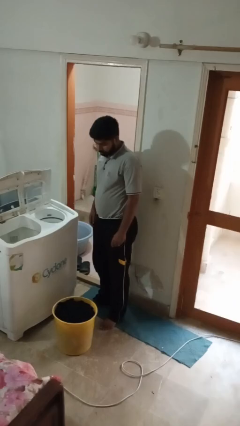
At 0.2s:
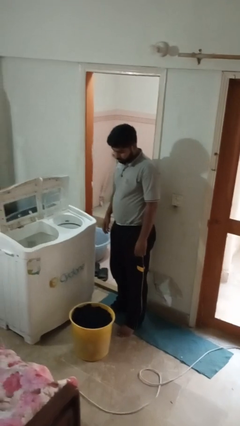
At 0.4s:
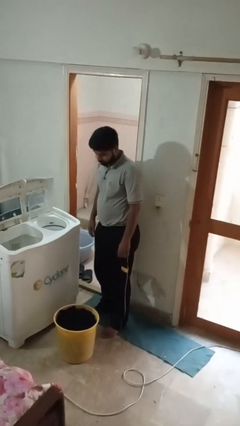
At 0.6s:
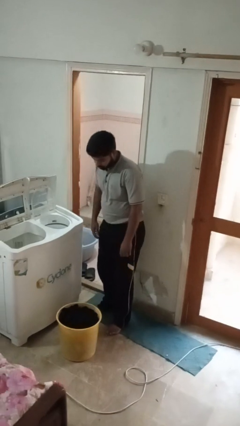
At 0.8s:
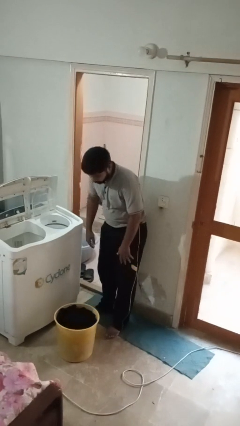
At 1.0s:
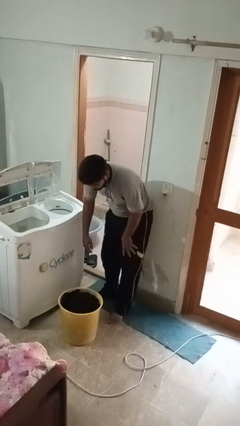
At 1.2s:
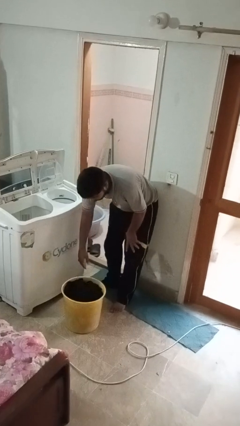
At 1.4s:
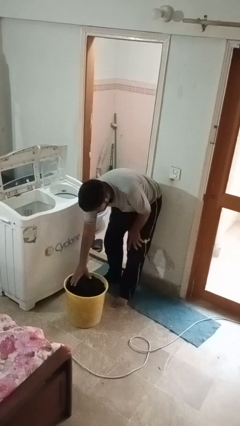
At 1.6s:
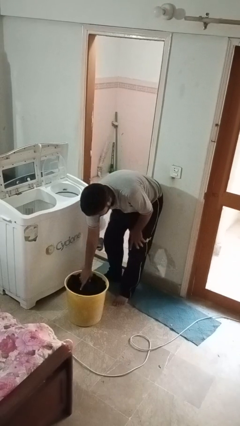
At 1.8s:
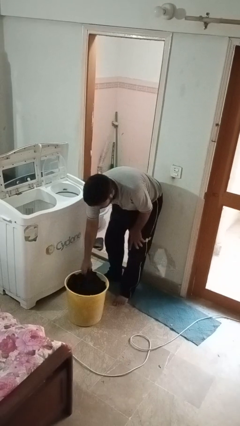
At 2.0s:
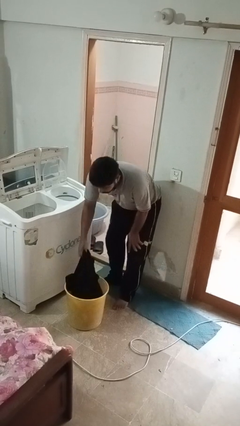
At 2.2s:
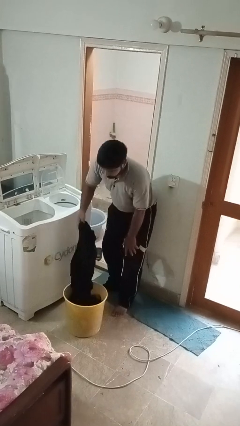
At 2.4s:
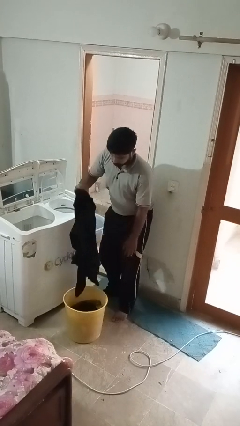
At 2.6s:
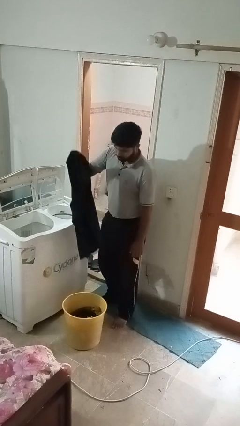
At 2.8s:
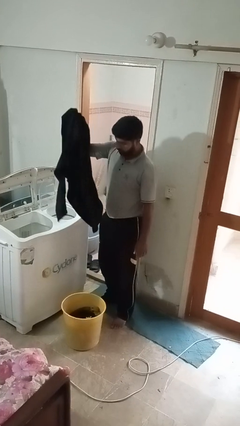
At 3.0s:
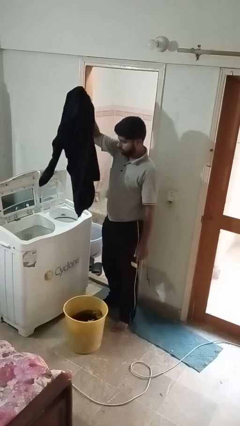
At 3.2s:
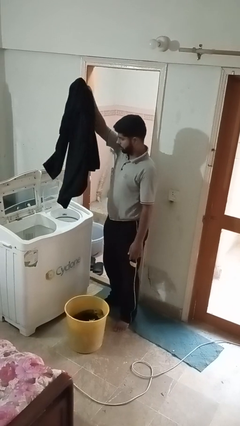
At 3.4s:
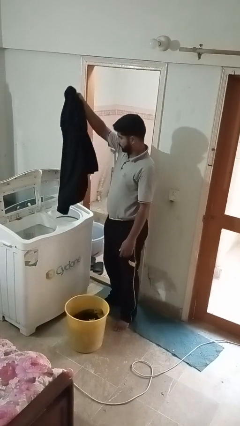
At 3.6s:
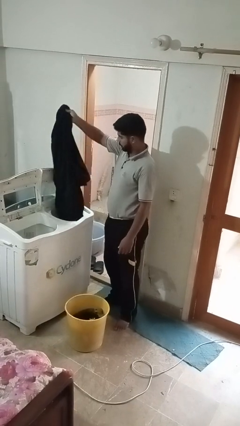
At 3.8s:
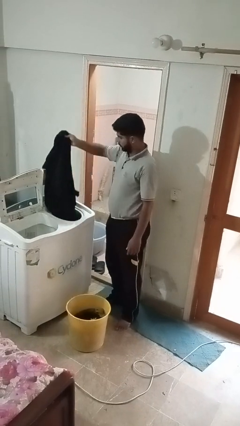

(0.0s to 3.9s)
person loads dryer

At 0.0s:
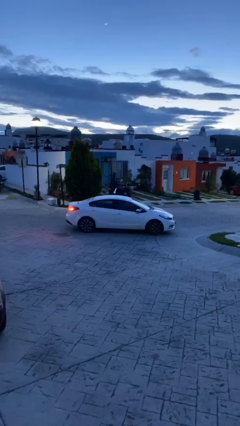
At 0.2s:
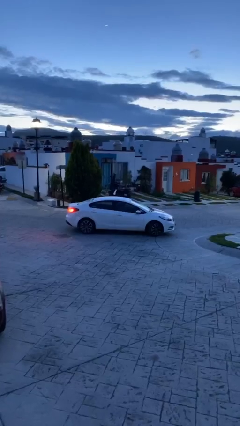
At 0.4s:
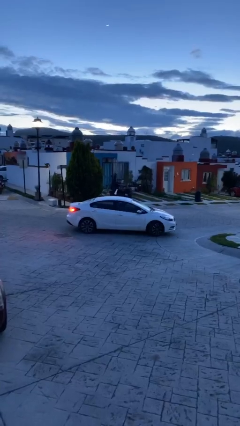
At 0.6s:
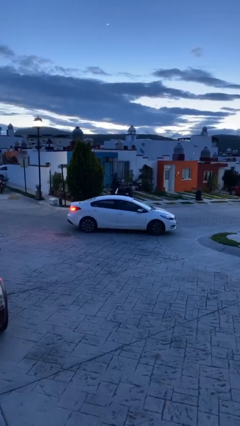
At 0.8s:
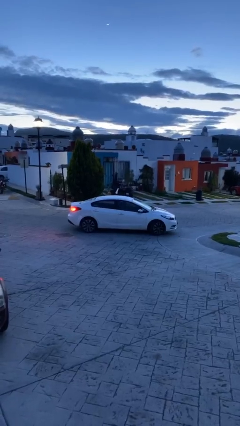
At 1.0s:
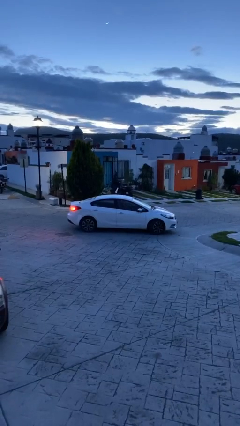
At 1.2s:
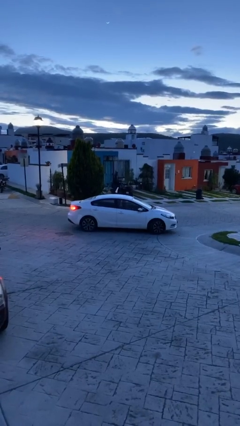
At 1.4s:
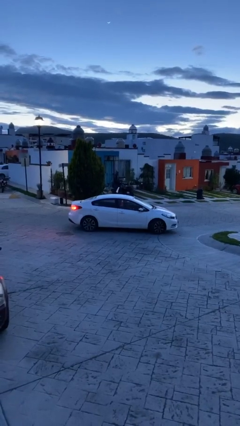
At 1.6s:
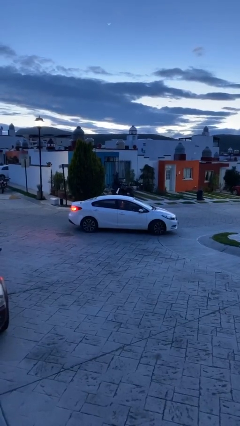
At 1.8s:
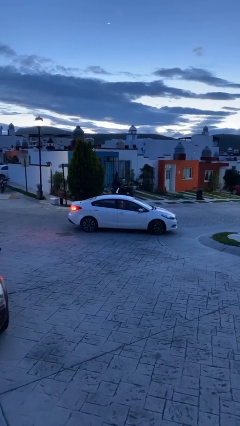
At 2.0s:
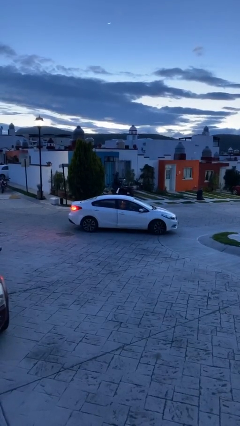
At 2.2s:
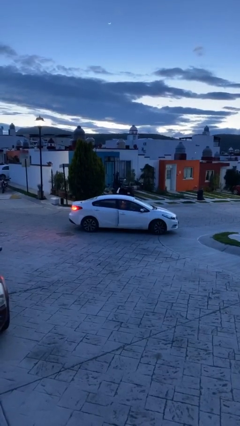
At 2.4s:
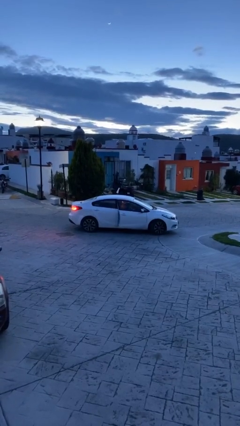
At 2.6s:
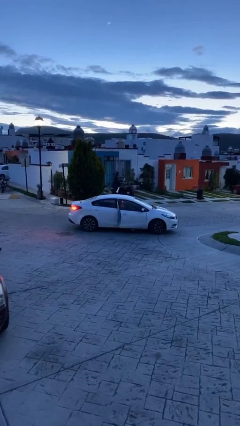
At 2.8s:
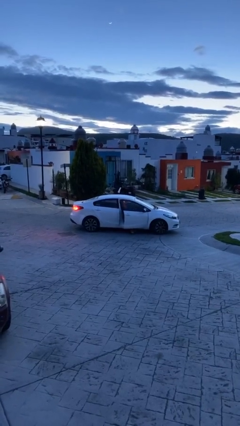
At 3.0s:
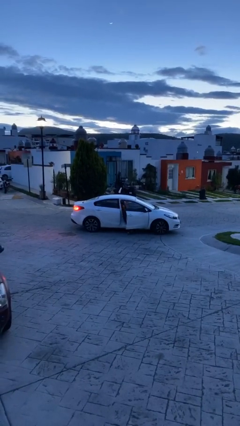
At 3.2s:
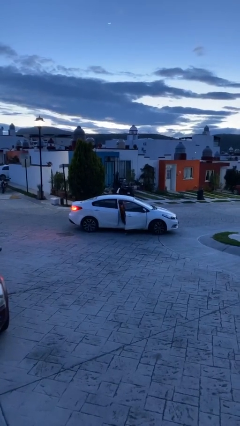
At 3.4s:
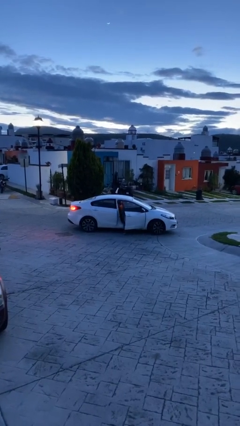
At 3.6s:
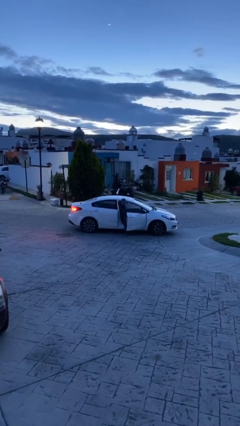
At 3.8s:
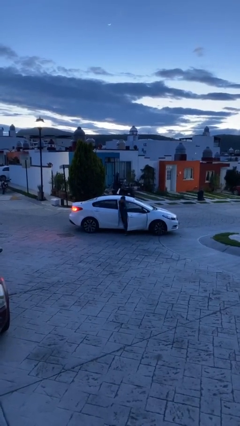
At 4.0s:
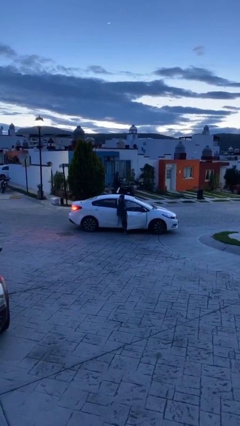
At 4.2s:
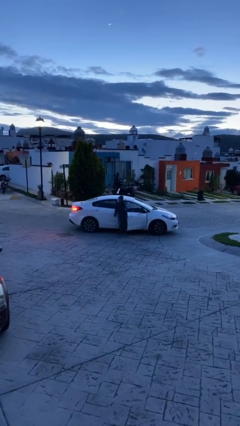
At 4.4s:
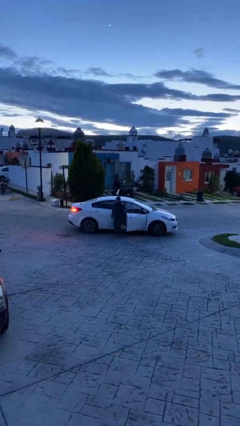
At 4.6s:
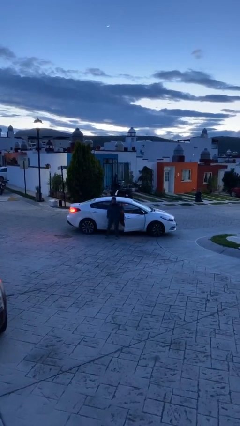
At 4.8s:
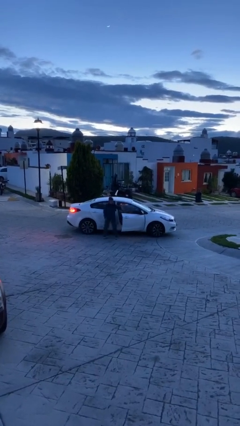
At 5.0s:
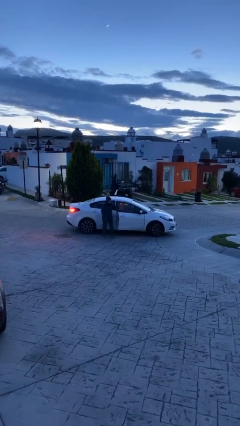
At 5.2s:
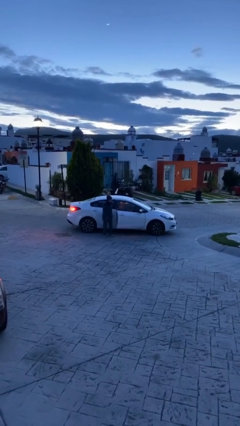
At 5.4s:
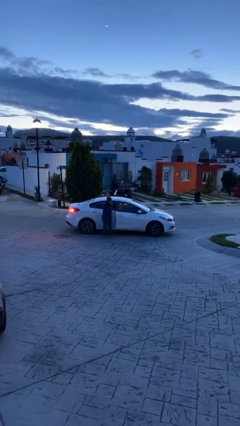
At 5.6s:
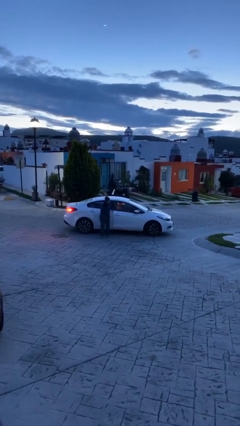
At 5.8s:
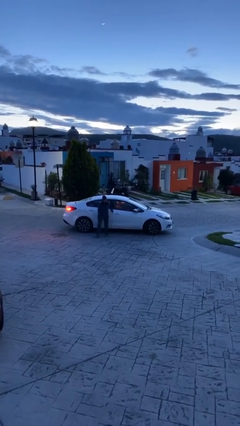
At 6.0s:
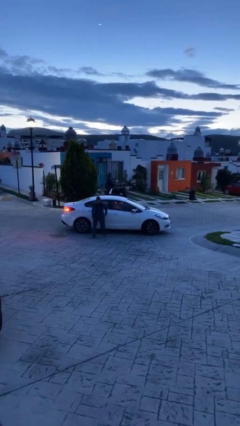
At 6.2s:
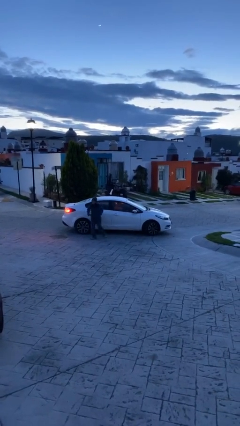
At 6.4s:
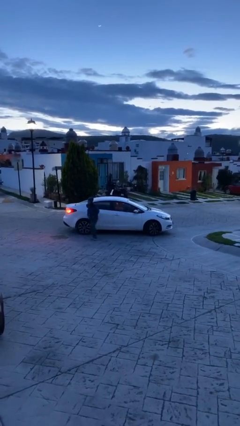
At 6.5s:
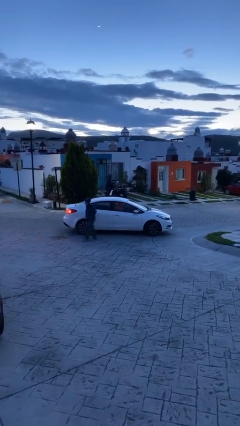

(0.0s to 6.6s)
car drops off person

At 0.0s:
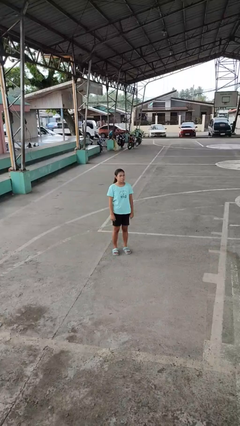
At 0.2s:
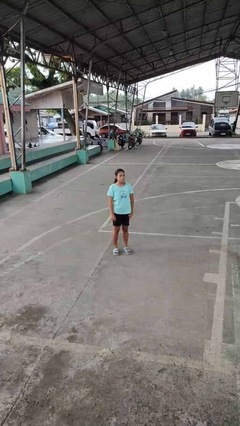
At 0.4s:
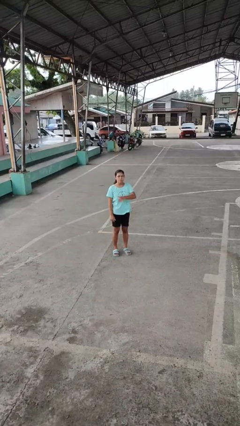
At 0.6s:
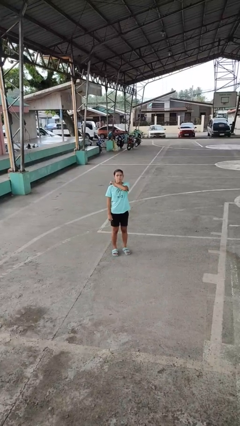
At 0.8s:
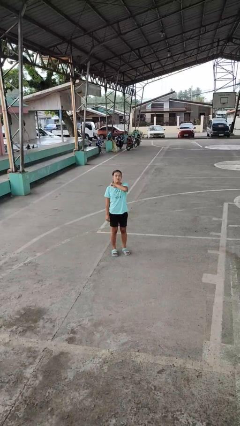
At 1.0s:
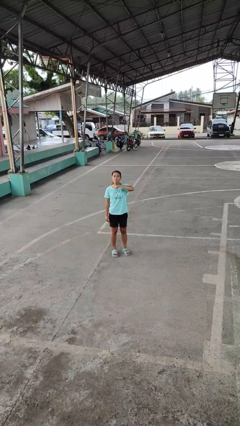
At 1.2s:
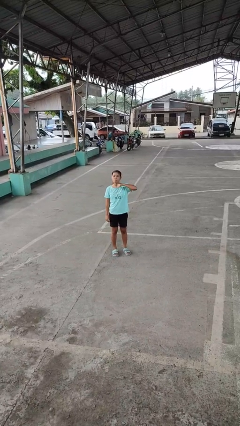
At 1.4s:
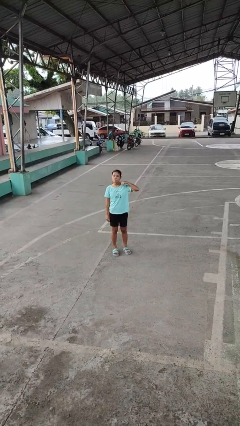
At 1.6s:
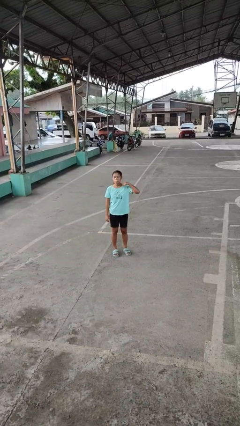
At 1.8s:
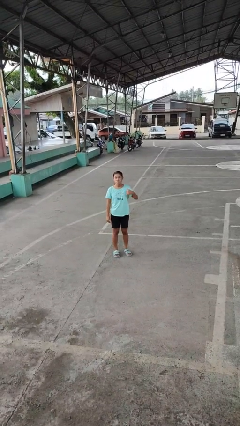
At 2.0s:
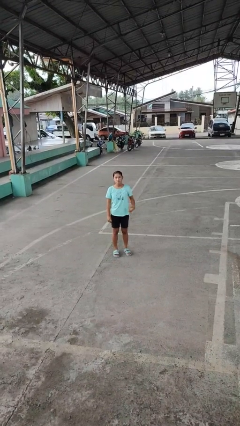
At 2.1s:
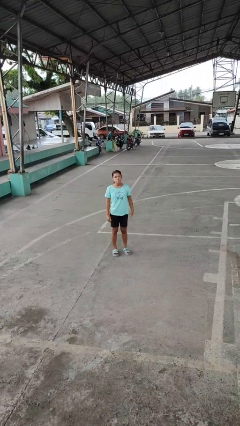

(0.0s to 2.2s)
person gestures cut

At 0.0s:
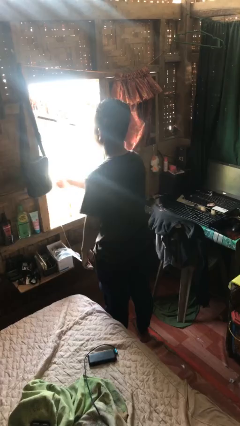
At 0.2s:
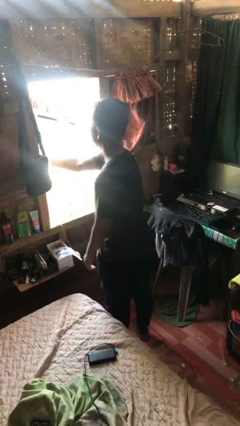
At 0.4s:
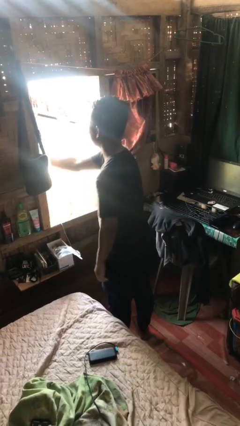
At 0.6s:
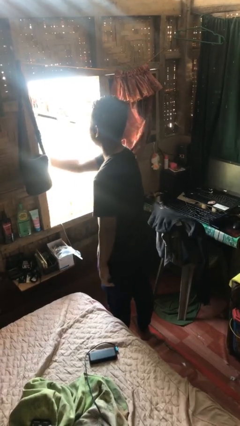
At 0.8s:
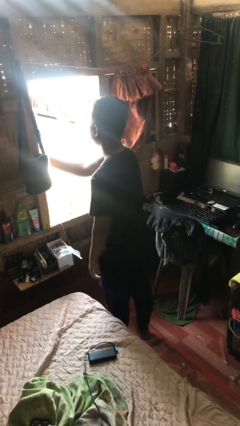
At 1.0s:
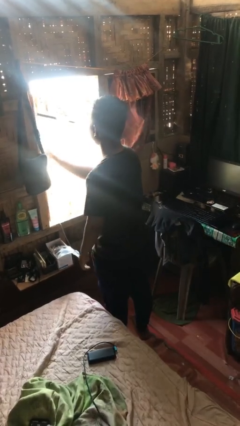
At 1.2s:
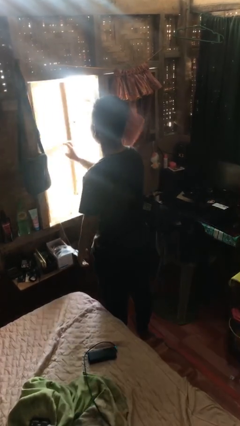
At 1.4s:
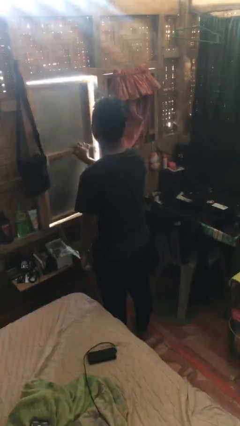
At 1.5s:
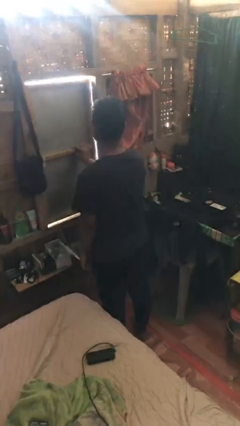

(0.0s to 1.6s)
person closes home window

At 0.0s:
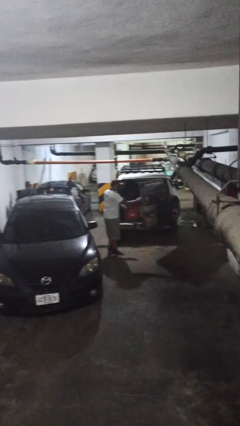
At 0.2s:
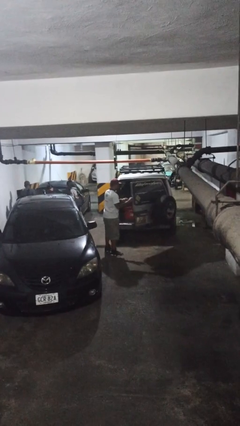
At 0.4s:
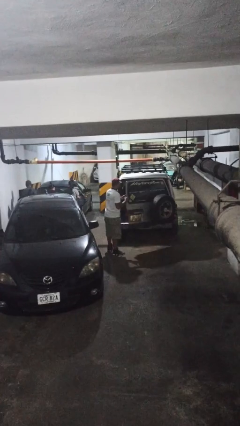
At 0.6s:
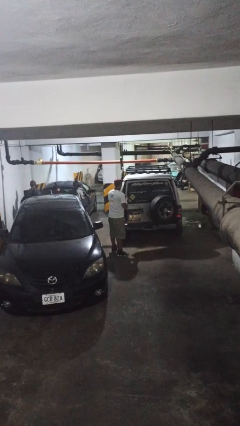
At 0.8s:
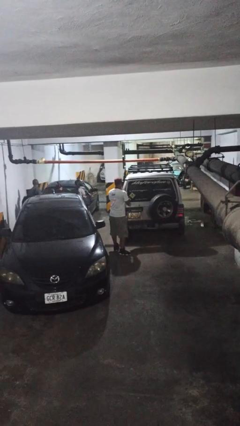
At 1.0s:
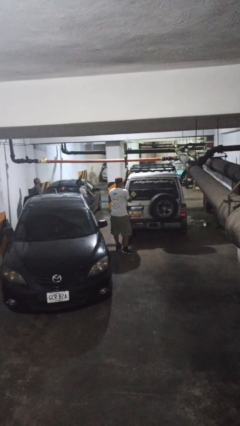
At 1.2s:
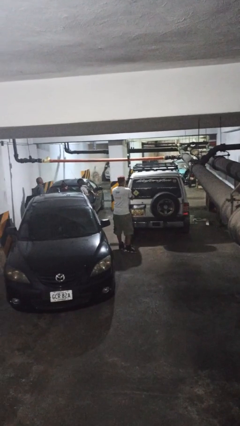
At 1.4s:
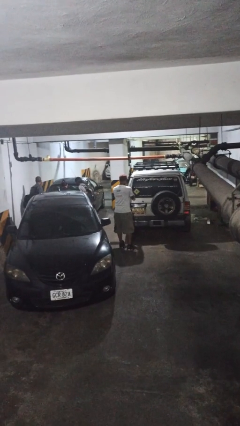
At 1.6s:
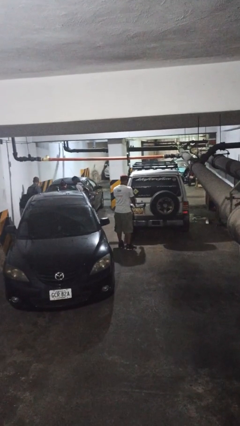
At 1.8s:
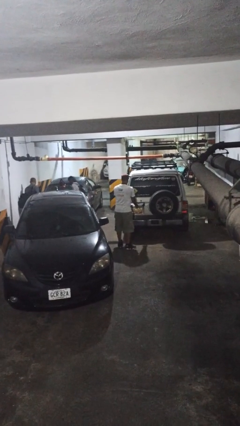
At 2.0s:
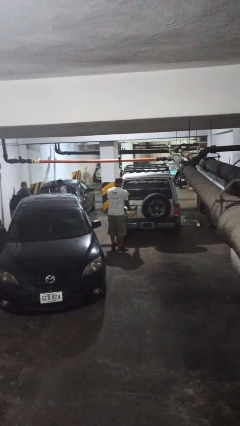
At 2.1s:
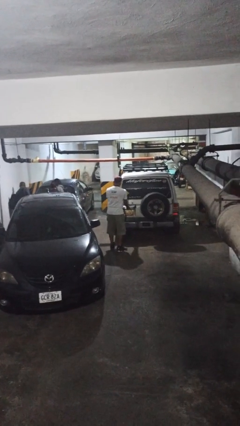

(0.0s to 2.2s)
person closes car trunk

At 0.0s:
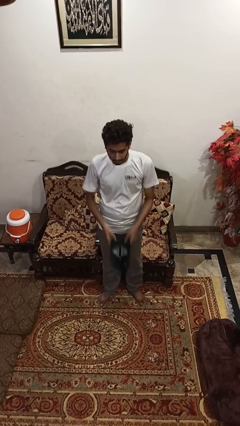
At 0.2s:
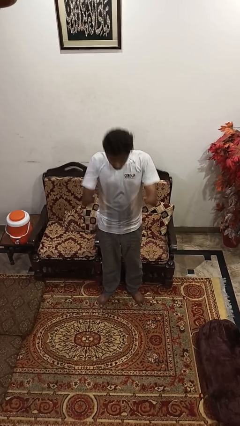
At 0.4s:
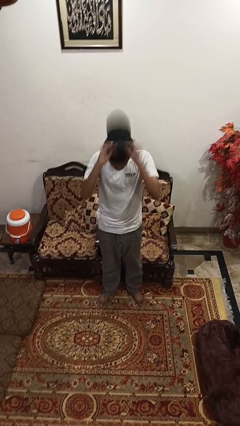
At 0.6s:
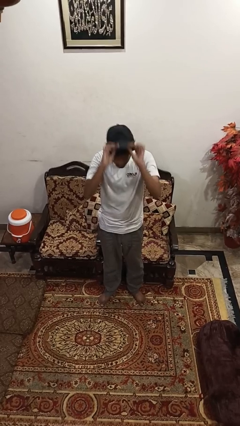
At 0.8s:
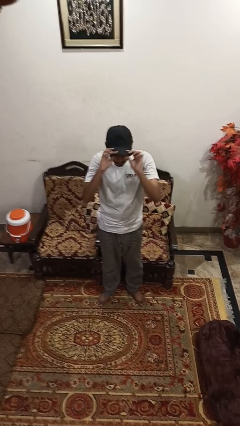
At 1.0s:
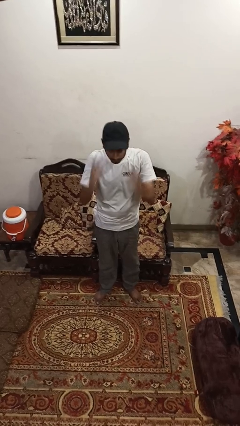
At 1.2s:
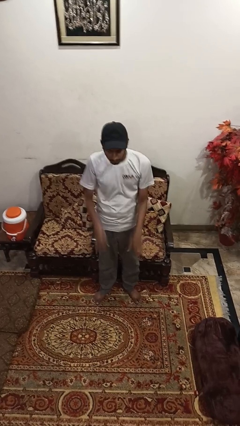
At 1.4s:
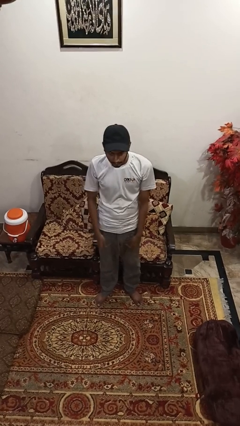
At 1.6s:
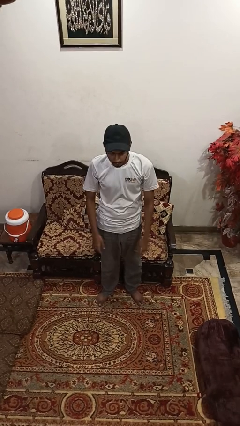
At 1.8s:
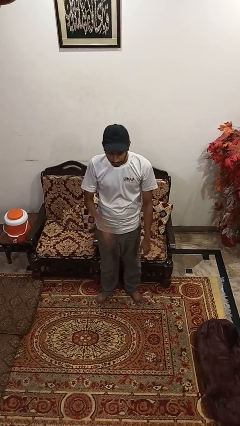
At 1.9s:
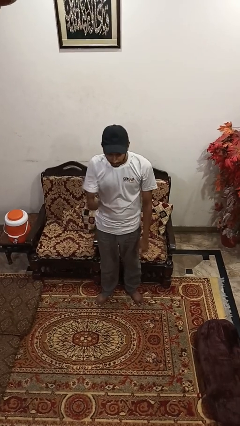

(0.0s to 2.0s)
person puts on hat
